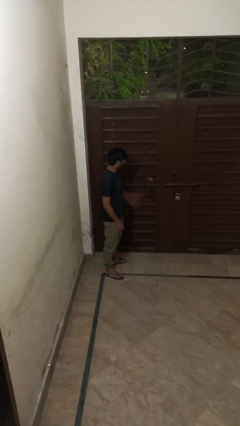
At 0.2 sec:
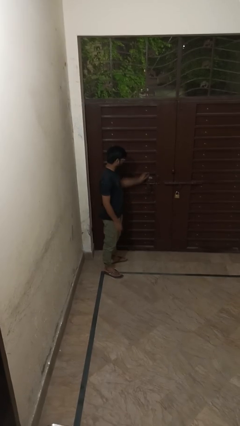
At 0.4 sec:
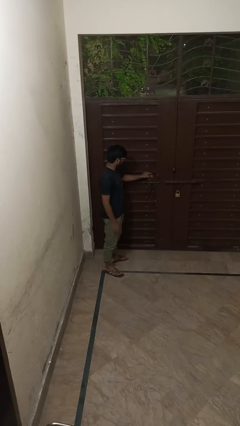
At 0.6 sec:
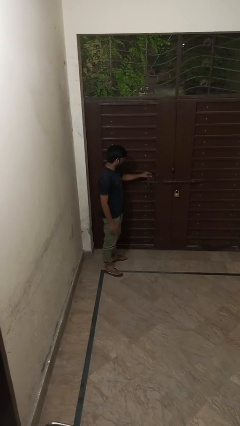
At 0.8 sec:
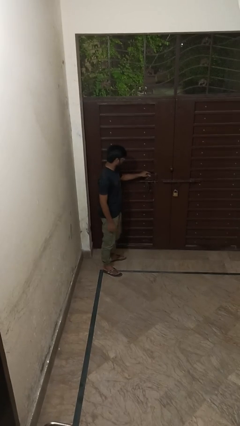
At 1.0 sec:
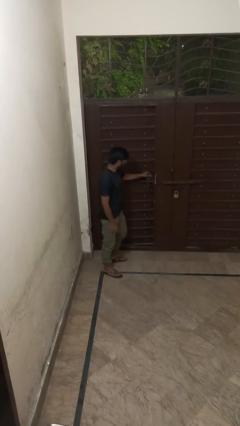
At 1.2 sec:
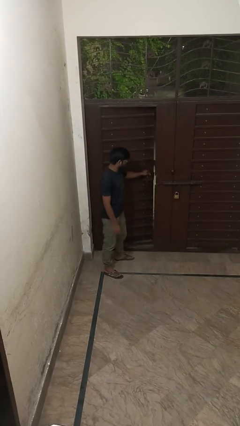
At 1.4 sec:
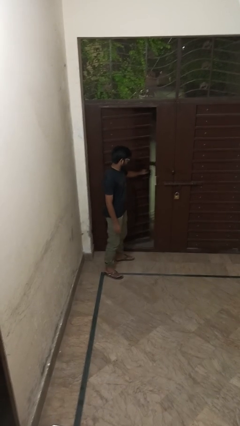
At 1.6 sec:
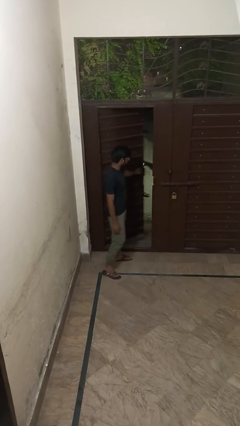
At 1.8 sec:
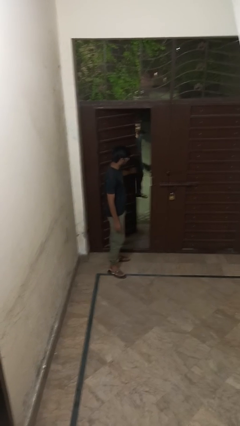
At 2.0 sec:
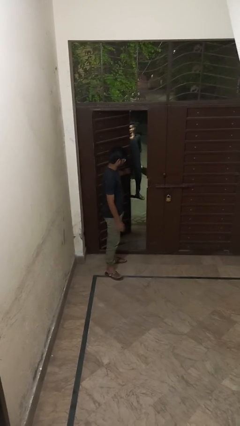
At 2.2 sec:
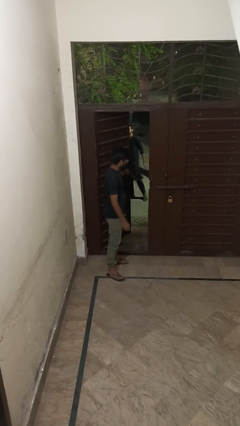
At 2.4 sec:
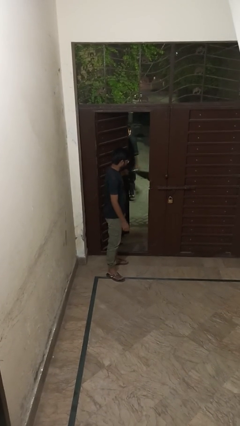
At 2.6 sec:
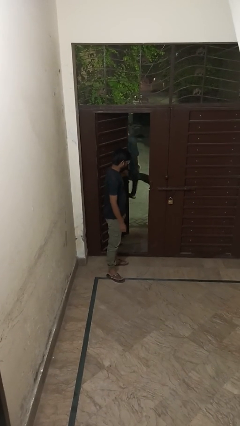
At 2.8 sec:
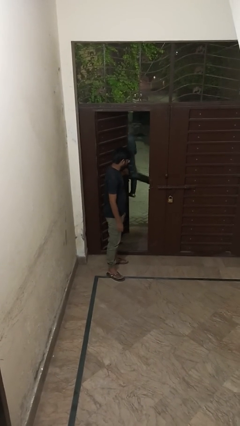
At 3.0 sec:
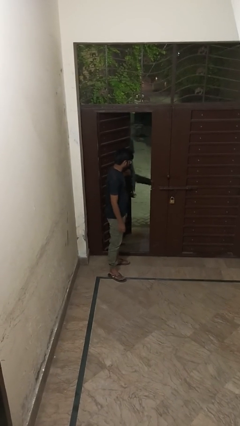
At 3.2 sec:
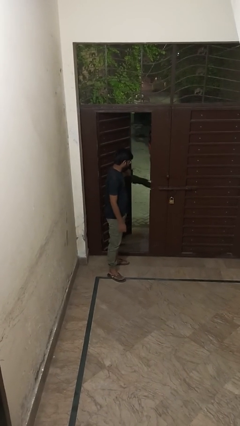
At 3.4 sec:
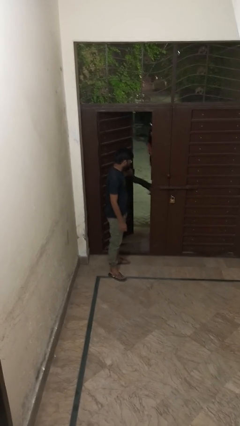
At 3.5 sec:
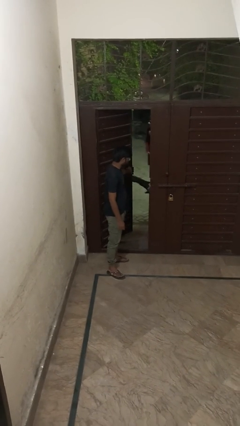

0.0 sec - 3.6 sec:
person opens facility door

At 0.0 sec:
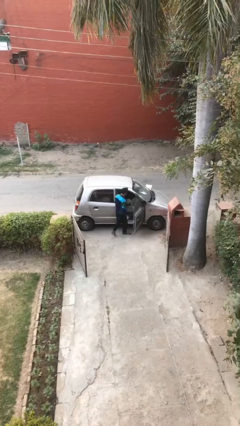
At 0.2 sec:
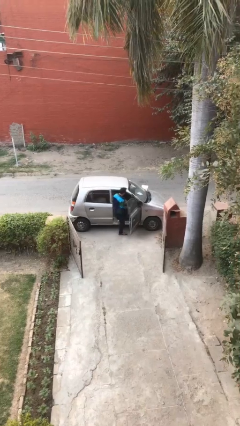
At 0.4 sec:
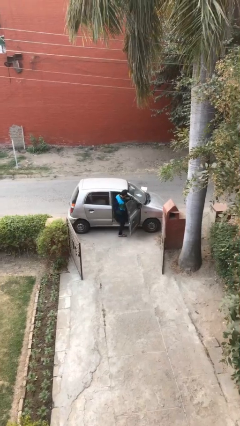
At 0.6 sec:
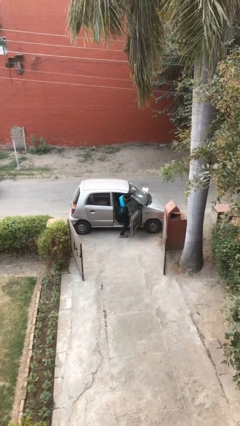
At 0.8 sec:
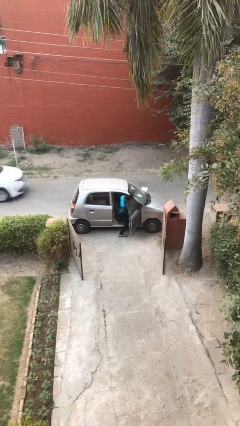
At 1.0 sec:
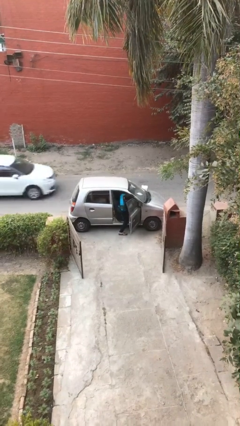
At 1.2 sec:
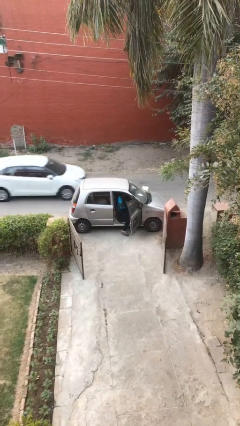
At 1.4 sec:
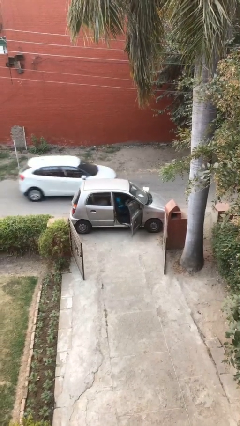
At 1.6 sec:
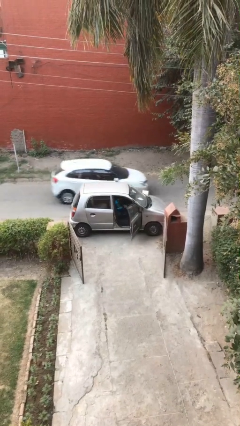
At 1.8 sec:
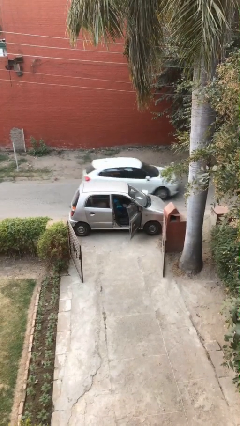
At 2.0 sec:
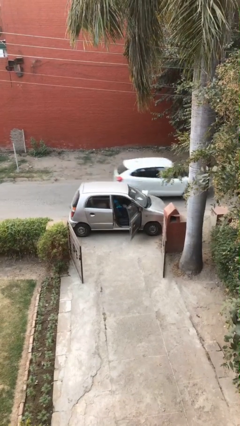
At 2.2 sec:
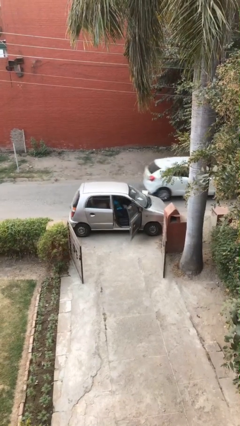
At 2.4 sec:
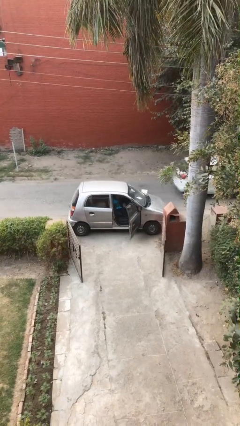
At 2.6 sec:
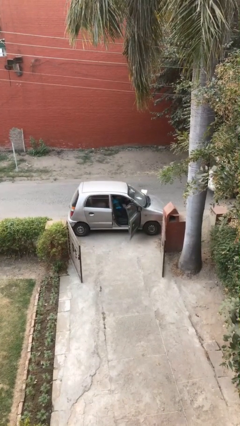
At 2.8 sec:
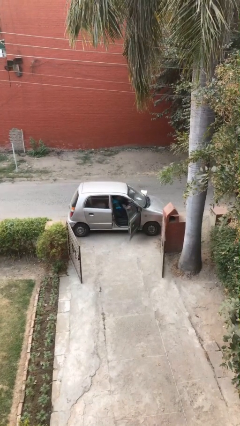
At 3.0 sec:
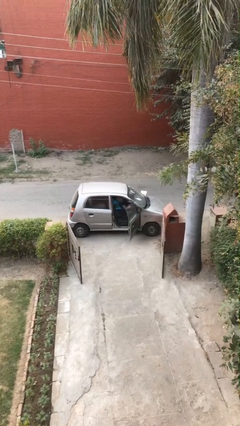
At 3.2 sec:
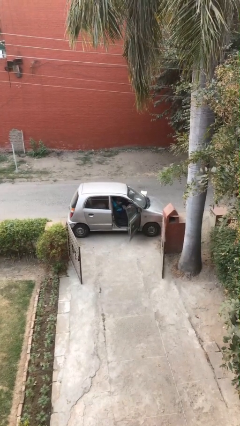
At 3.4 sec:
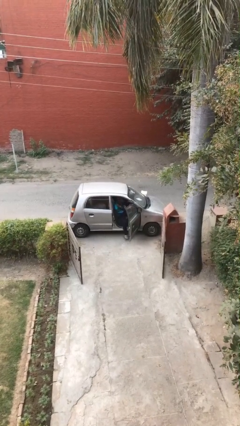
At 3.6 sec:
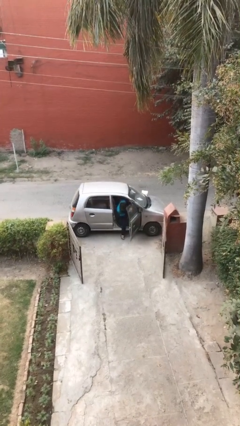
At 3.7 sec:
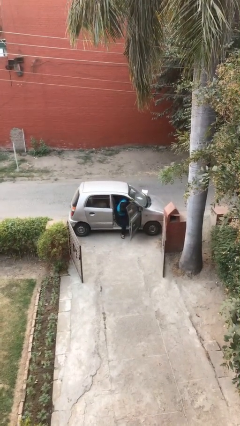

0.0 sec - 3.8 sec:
person enters car

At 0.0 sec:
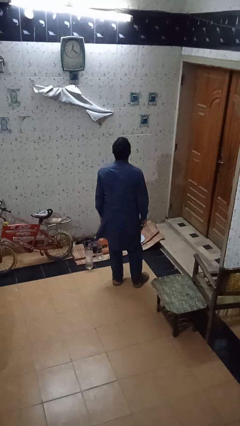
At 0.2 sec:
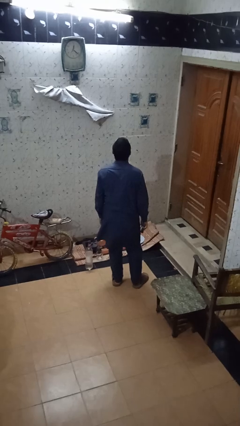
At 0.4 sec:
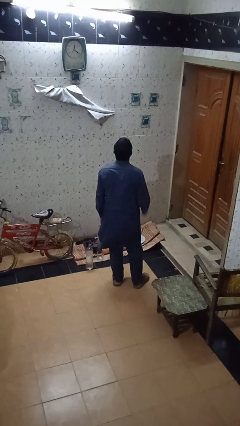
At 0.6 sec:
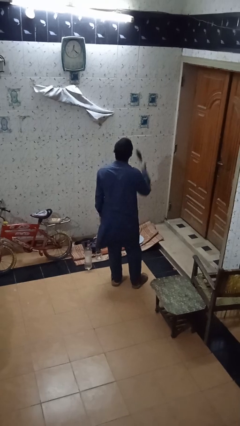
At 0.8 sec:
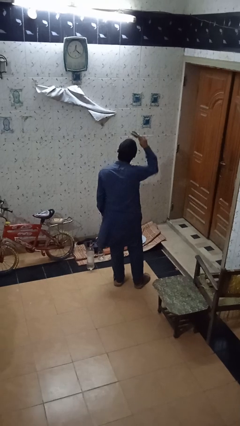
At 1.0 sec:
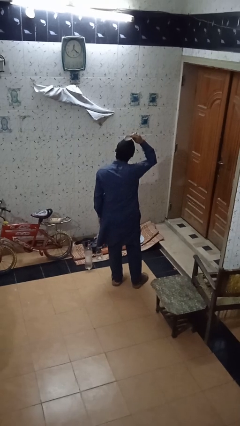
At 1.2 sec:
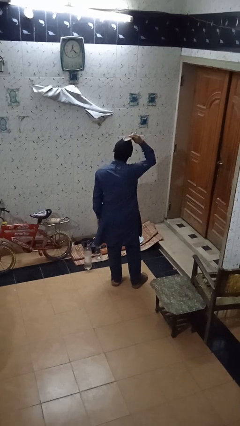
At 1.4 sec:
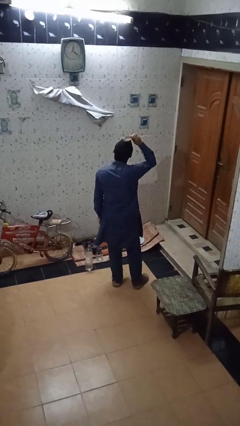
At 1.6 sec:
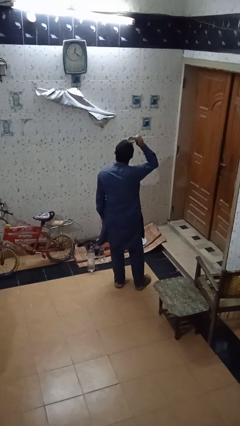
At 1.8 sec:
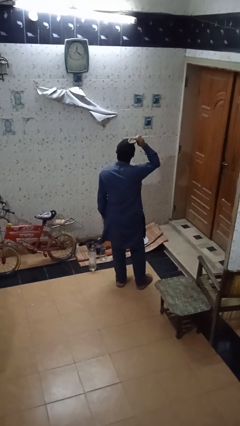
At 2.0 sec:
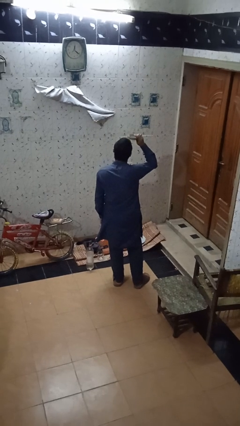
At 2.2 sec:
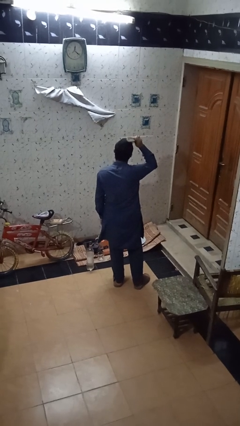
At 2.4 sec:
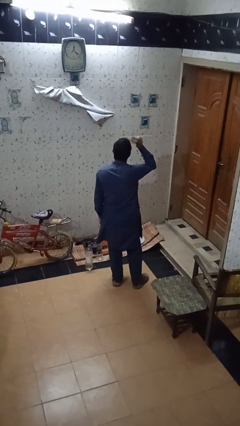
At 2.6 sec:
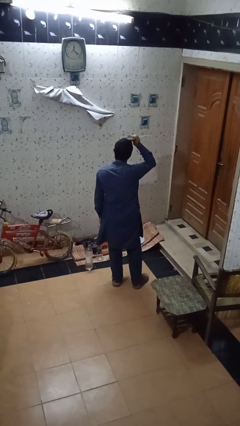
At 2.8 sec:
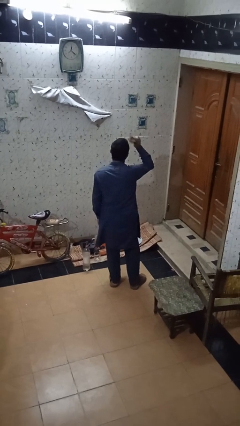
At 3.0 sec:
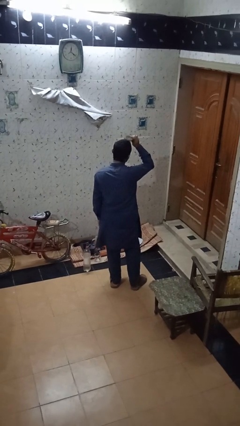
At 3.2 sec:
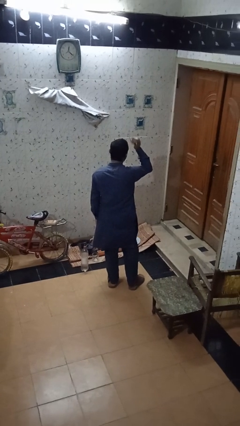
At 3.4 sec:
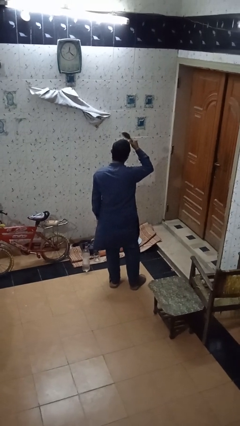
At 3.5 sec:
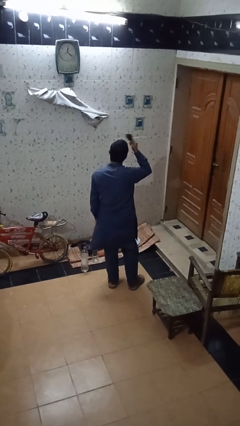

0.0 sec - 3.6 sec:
person brushes hair

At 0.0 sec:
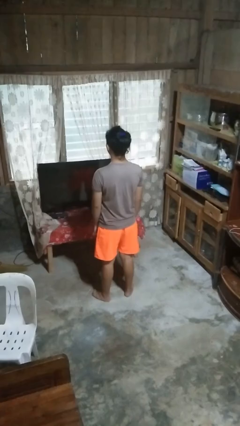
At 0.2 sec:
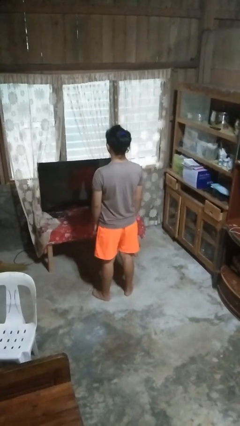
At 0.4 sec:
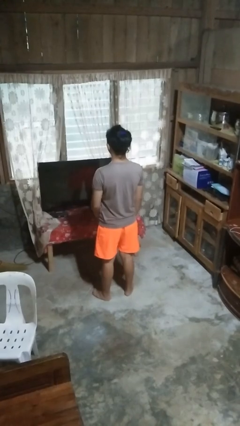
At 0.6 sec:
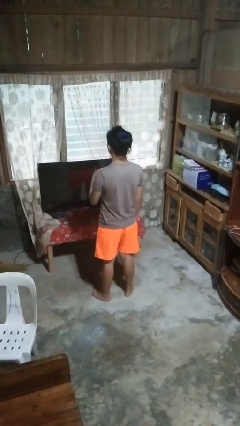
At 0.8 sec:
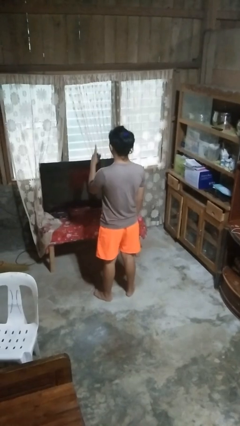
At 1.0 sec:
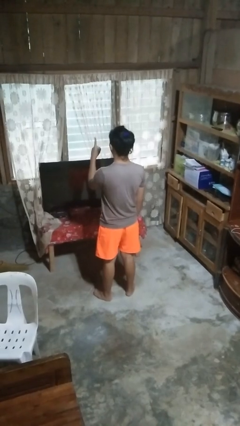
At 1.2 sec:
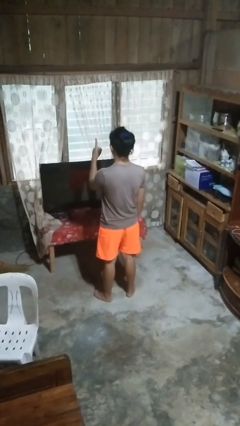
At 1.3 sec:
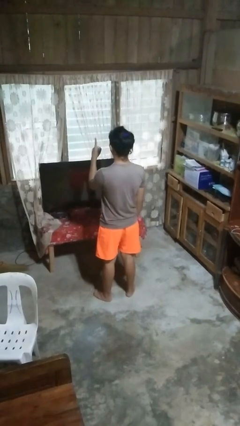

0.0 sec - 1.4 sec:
person gestures number one

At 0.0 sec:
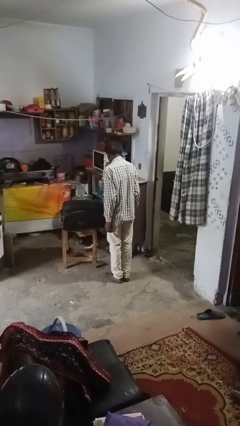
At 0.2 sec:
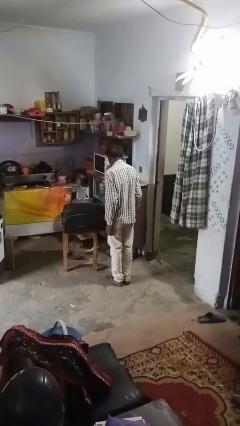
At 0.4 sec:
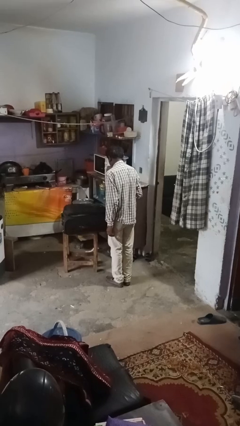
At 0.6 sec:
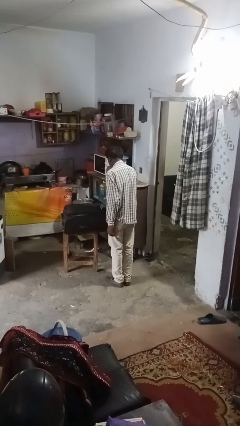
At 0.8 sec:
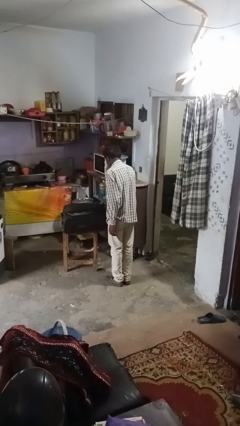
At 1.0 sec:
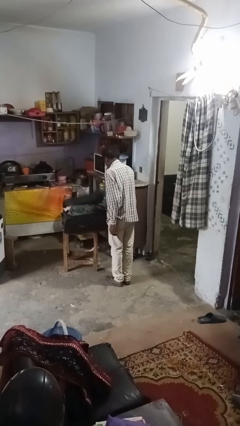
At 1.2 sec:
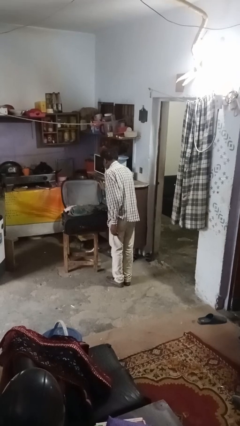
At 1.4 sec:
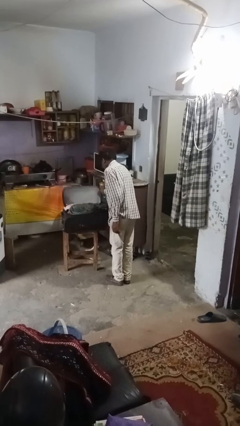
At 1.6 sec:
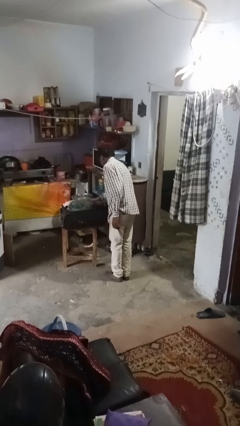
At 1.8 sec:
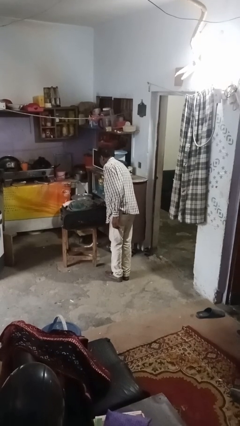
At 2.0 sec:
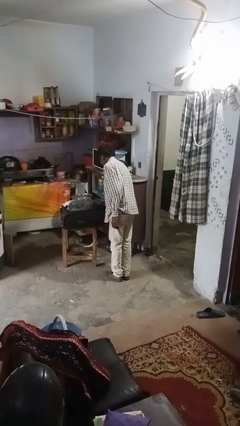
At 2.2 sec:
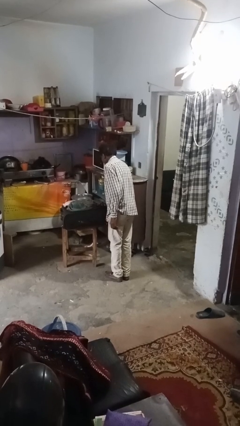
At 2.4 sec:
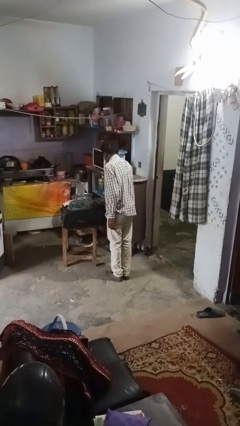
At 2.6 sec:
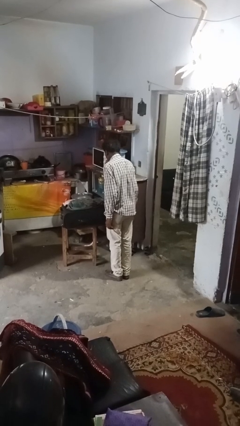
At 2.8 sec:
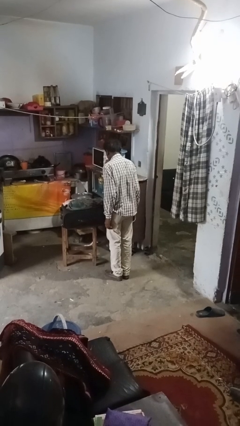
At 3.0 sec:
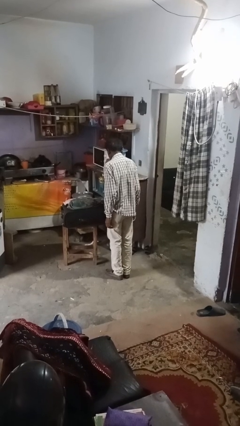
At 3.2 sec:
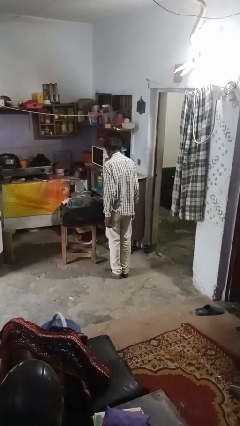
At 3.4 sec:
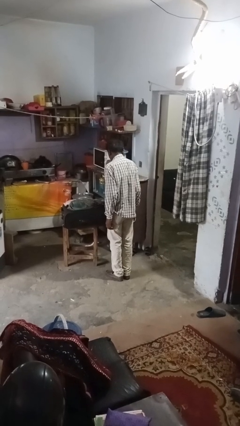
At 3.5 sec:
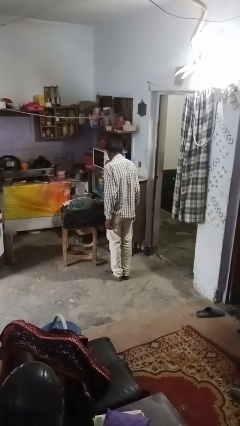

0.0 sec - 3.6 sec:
person opens suitcase

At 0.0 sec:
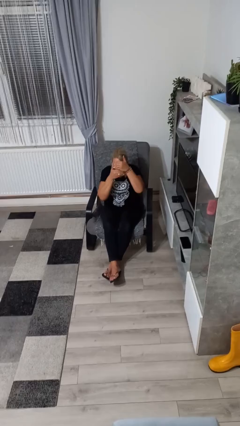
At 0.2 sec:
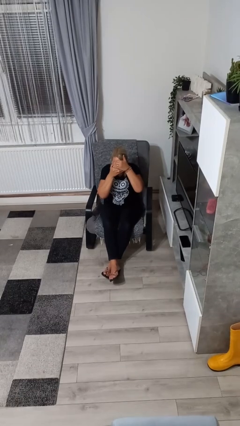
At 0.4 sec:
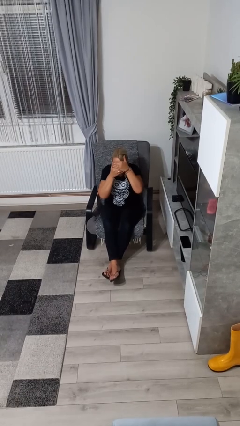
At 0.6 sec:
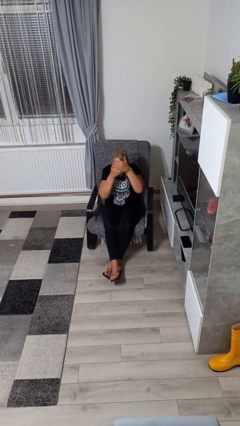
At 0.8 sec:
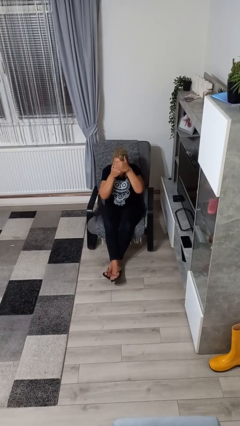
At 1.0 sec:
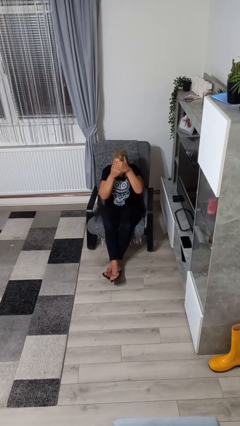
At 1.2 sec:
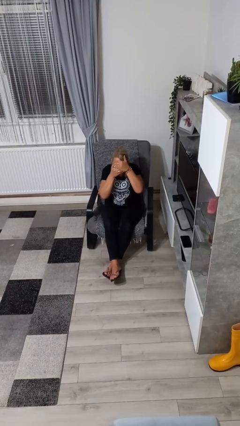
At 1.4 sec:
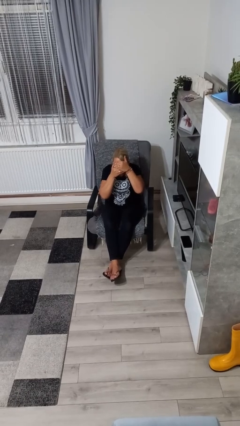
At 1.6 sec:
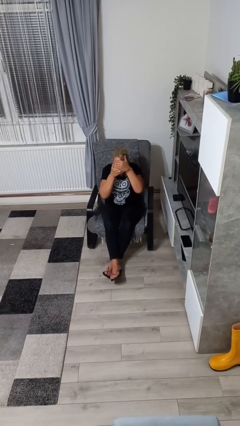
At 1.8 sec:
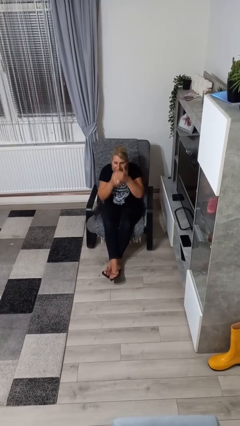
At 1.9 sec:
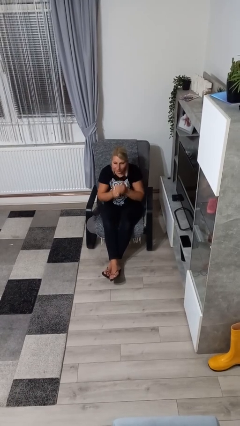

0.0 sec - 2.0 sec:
person covers face with hands
